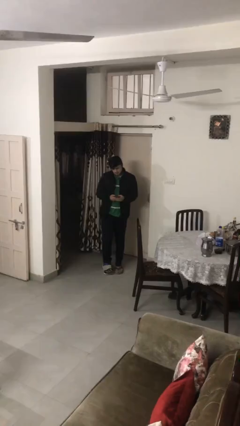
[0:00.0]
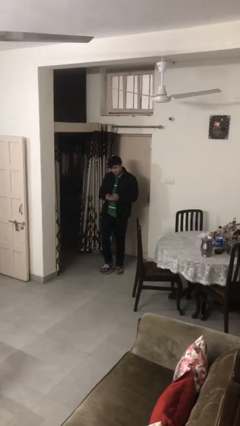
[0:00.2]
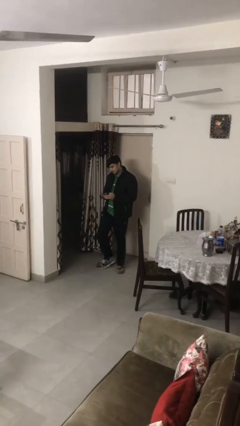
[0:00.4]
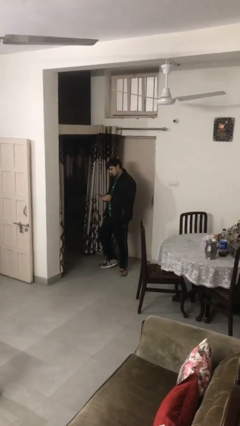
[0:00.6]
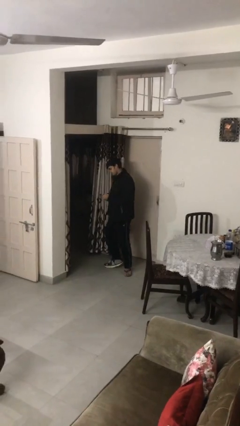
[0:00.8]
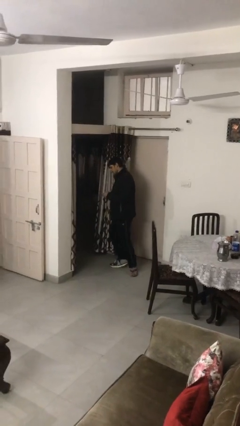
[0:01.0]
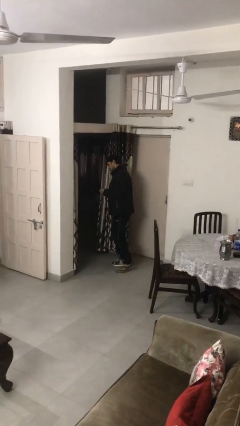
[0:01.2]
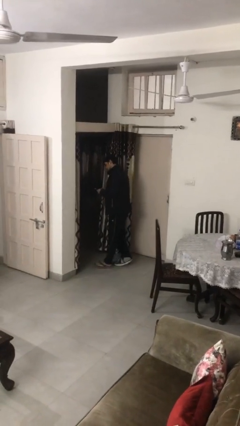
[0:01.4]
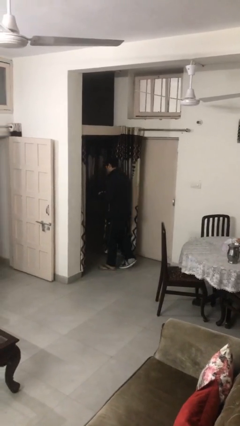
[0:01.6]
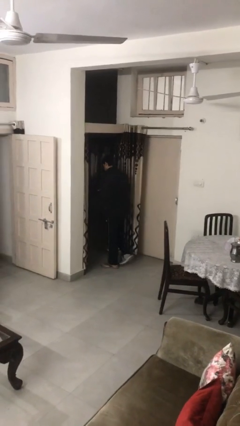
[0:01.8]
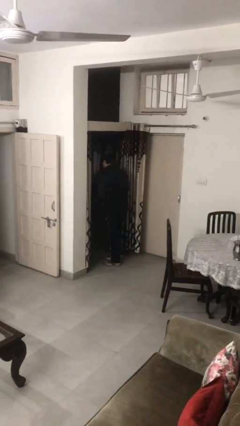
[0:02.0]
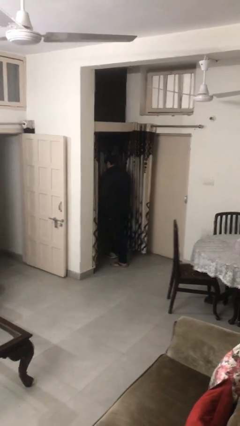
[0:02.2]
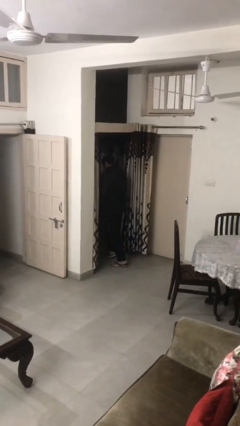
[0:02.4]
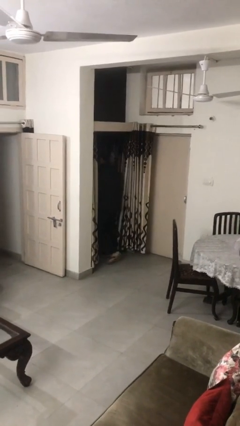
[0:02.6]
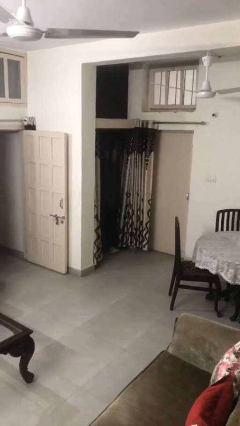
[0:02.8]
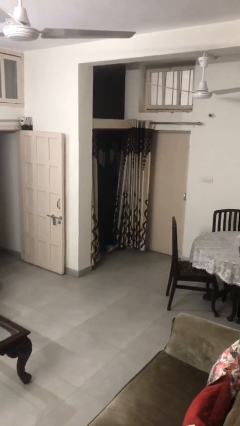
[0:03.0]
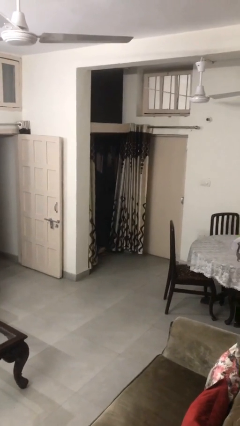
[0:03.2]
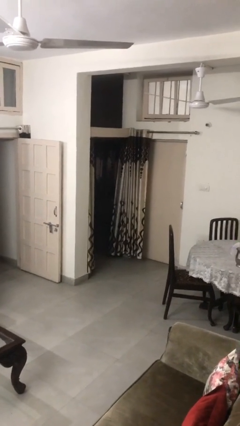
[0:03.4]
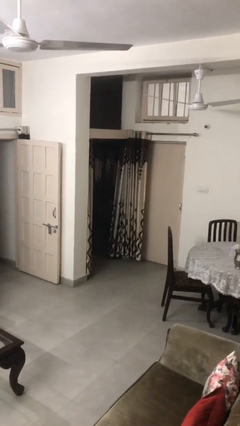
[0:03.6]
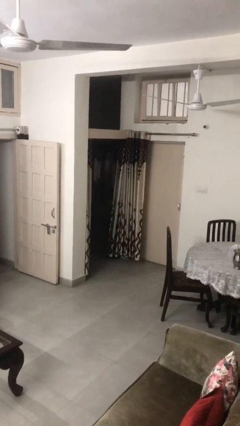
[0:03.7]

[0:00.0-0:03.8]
person exits scene through structure

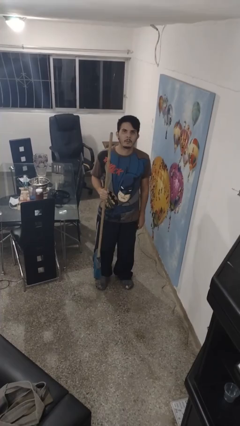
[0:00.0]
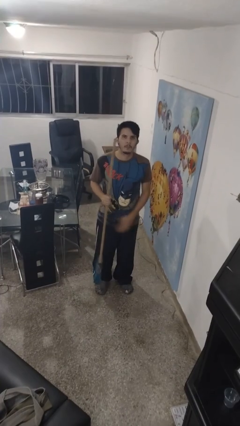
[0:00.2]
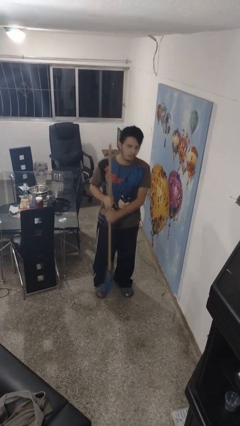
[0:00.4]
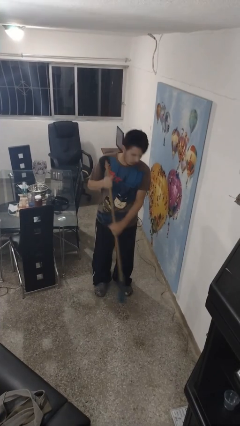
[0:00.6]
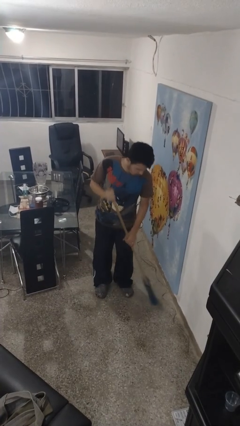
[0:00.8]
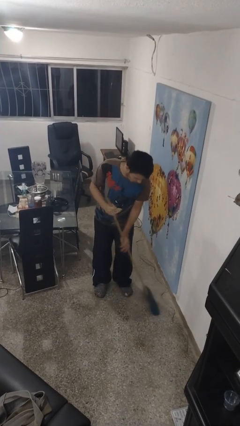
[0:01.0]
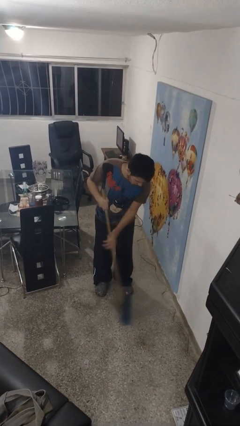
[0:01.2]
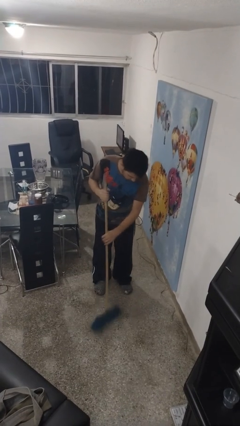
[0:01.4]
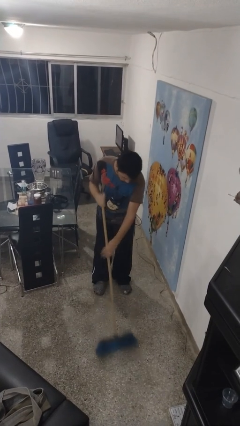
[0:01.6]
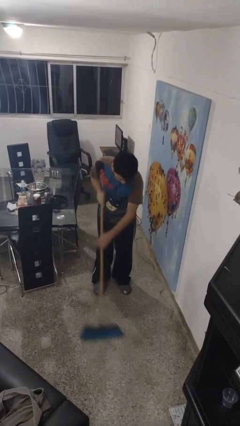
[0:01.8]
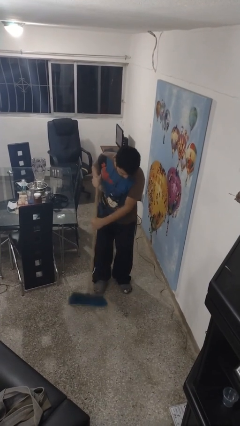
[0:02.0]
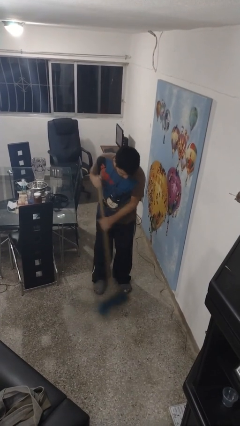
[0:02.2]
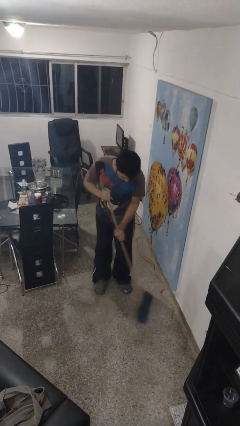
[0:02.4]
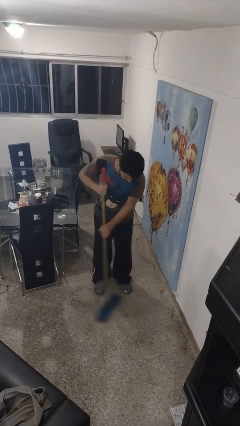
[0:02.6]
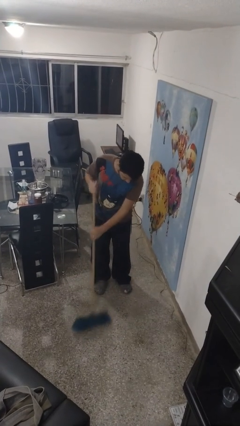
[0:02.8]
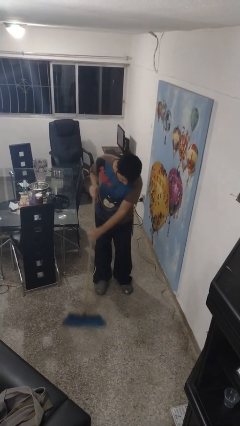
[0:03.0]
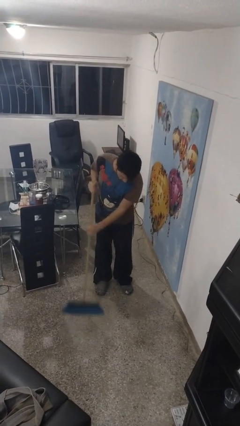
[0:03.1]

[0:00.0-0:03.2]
person sweeps floor

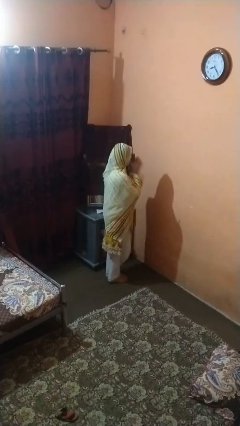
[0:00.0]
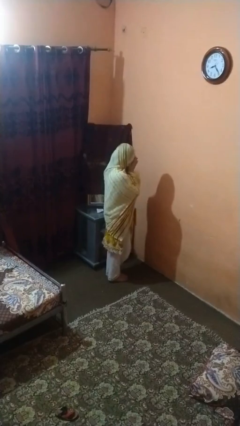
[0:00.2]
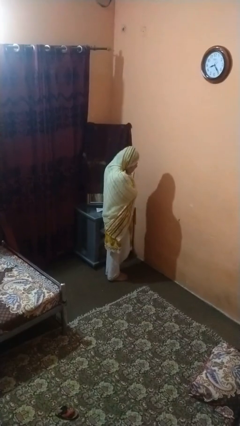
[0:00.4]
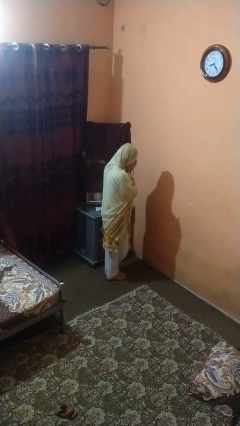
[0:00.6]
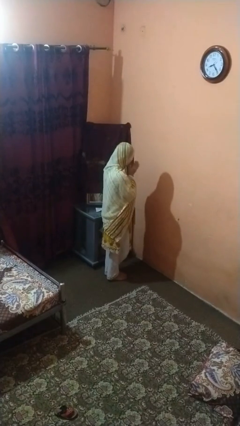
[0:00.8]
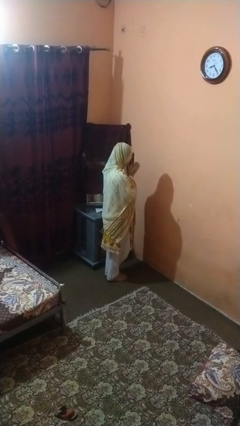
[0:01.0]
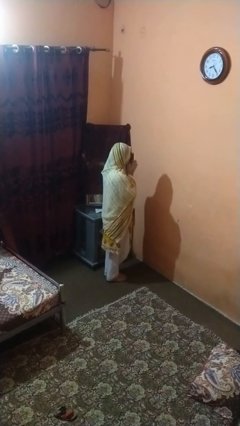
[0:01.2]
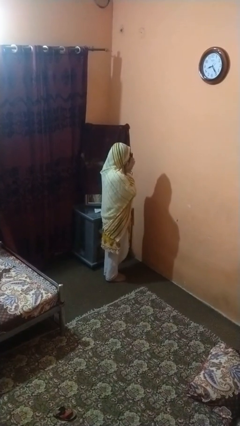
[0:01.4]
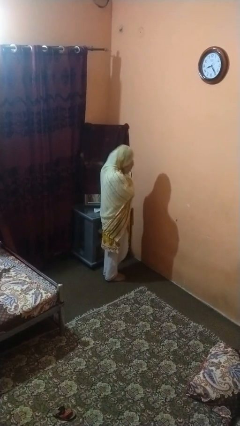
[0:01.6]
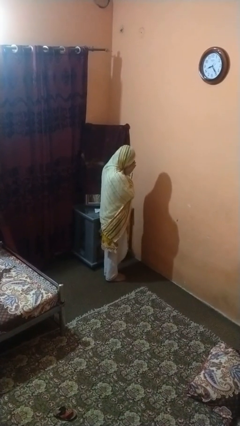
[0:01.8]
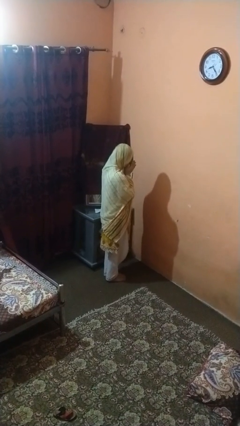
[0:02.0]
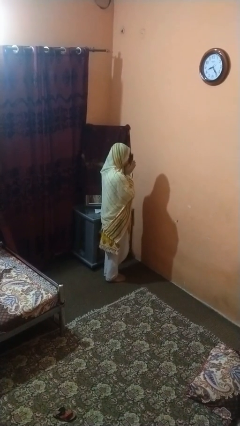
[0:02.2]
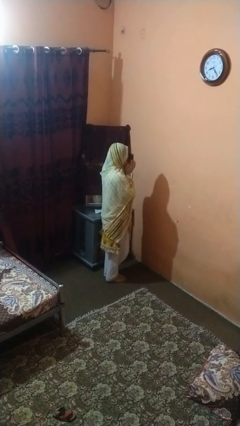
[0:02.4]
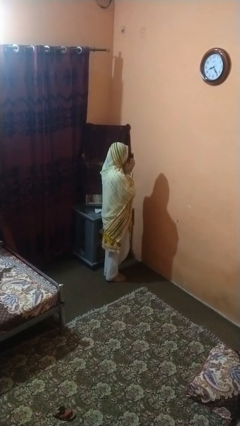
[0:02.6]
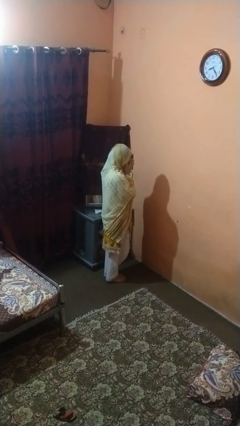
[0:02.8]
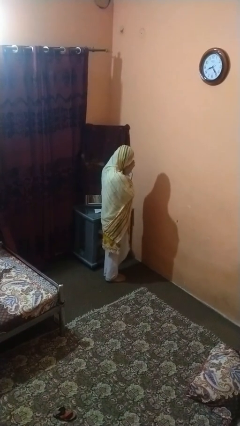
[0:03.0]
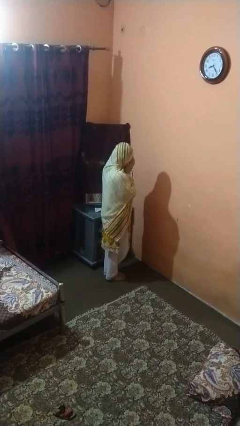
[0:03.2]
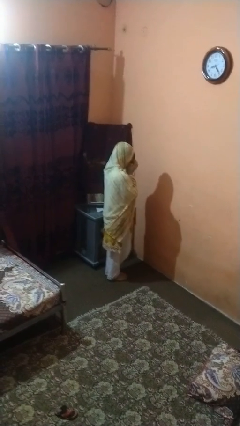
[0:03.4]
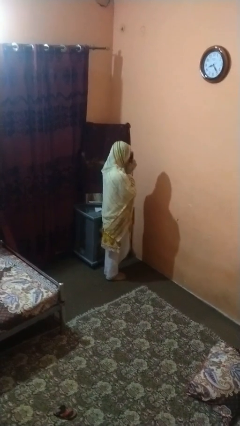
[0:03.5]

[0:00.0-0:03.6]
person sneezes into hand

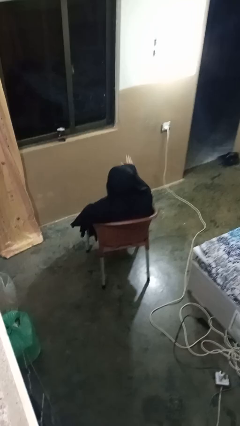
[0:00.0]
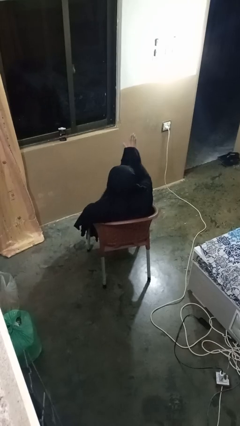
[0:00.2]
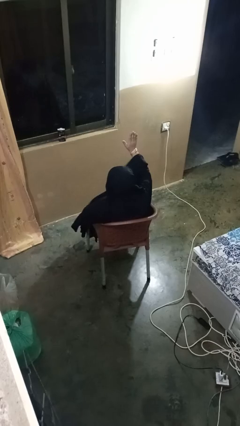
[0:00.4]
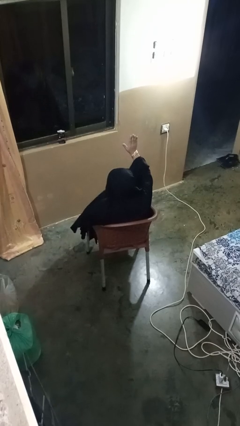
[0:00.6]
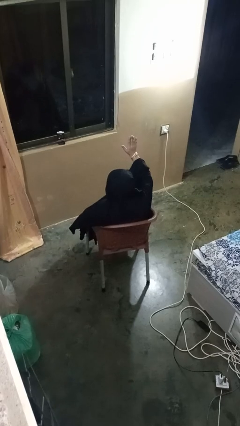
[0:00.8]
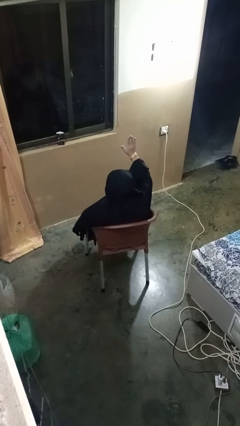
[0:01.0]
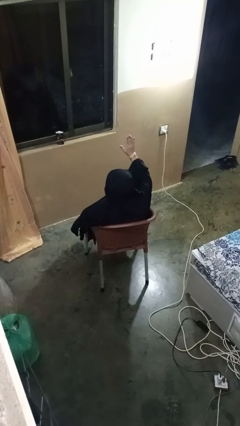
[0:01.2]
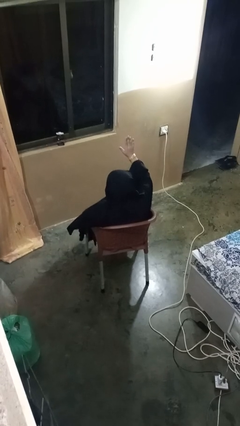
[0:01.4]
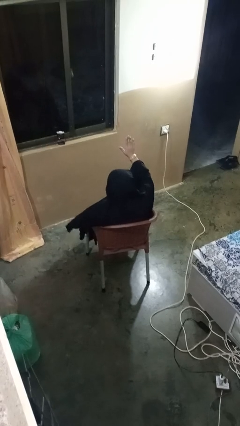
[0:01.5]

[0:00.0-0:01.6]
person gestures raise hand

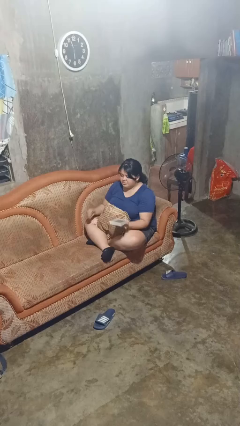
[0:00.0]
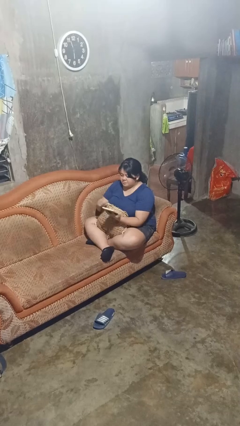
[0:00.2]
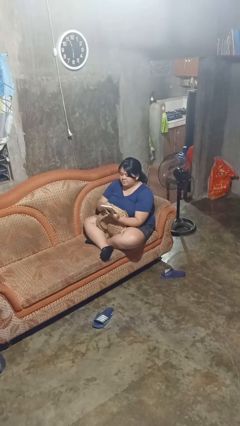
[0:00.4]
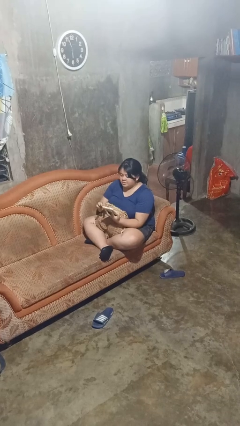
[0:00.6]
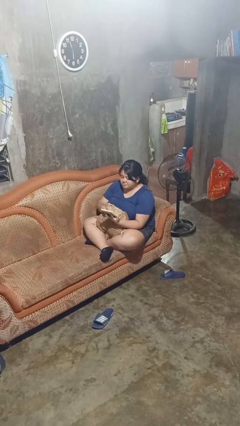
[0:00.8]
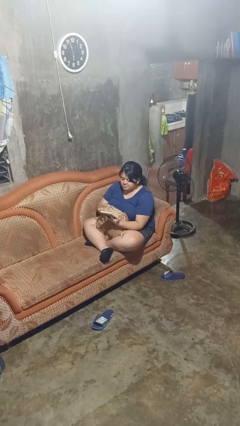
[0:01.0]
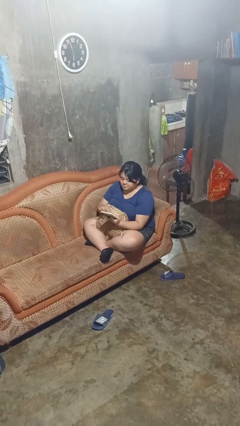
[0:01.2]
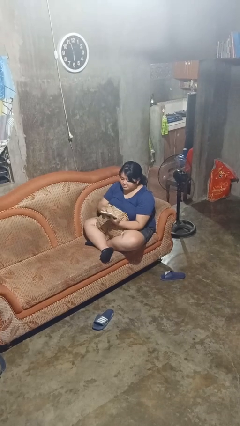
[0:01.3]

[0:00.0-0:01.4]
person interacts with tablet

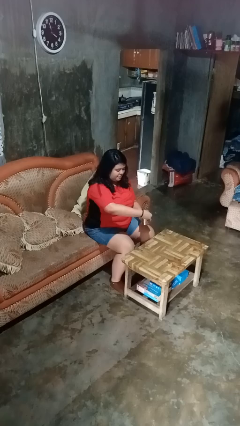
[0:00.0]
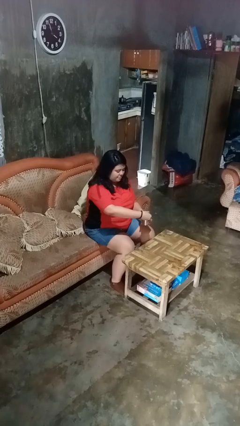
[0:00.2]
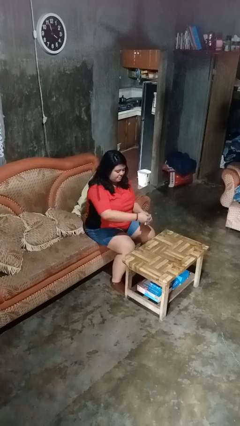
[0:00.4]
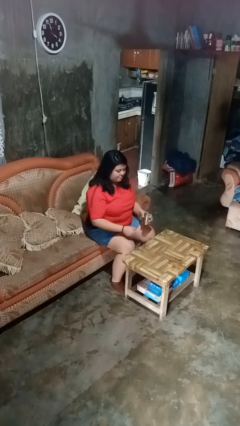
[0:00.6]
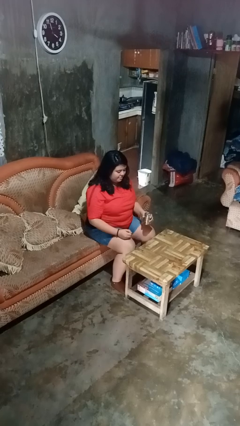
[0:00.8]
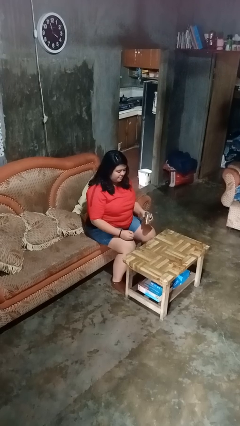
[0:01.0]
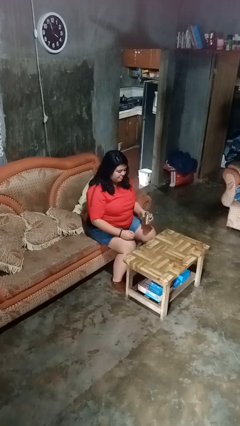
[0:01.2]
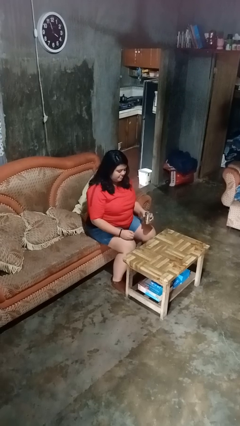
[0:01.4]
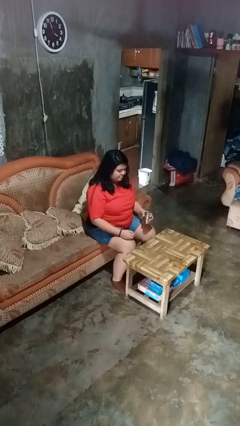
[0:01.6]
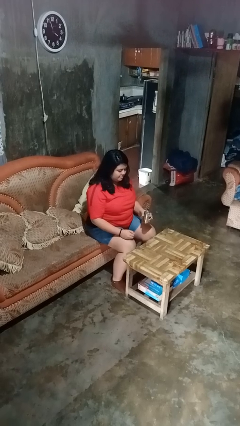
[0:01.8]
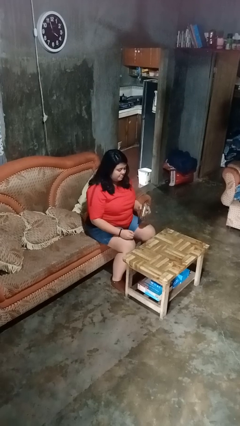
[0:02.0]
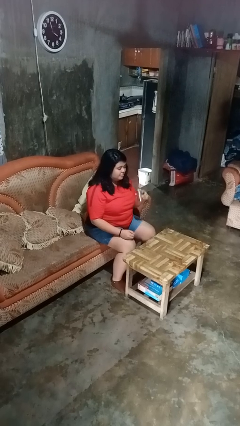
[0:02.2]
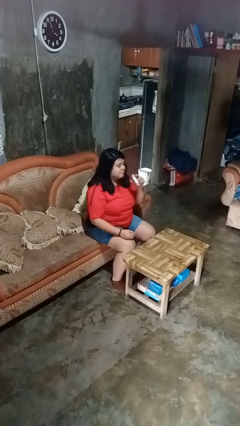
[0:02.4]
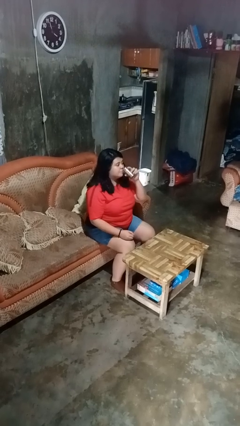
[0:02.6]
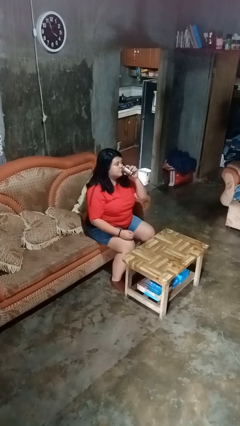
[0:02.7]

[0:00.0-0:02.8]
person opens beverage can

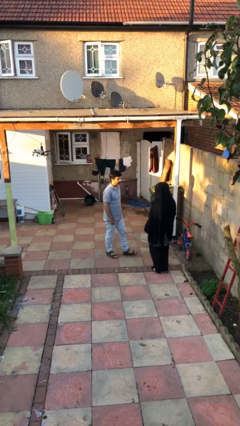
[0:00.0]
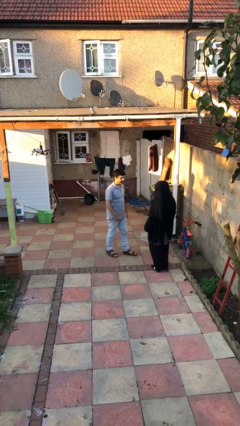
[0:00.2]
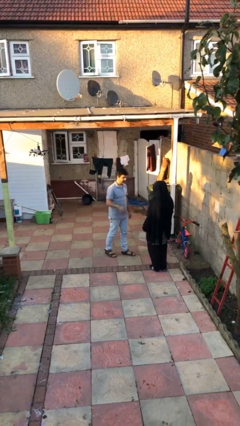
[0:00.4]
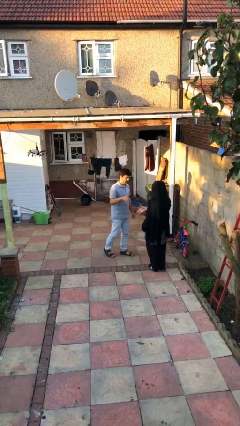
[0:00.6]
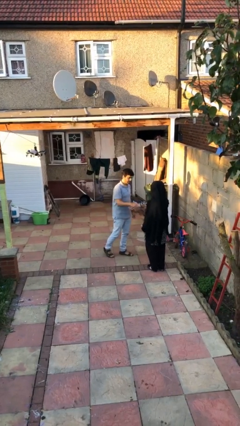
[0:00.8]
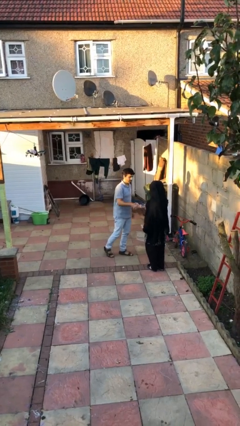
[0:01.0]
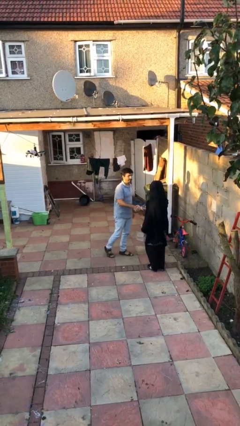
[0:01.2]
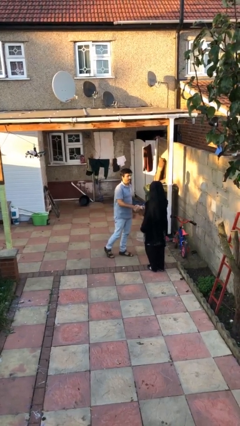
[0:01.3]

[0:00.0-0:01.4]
person shakes hand
